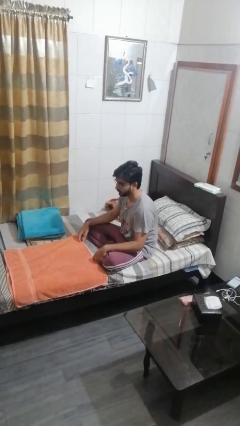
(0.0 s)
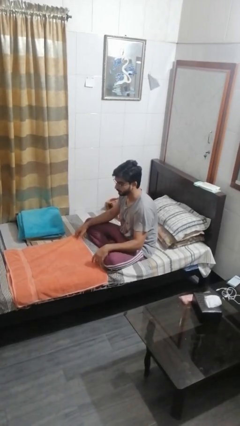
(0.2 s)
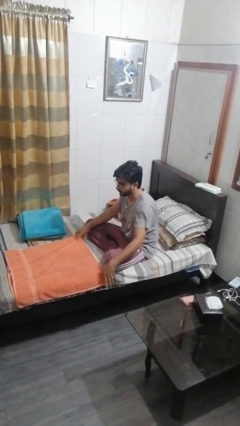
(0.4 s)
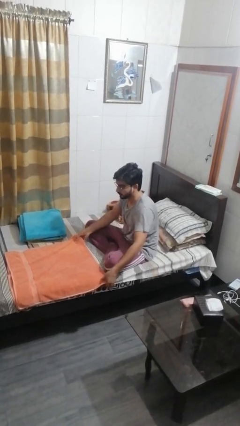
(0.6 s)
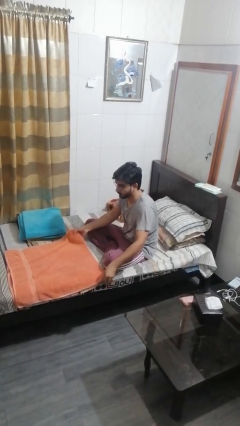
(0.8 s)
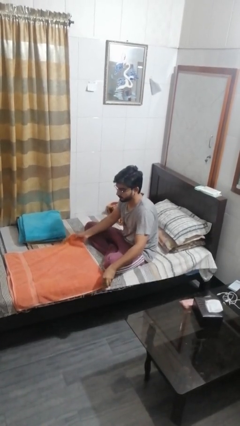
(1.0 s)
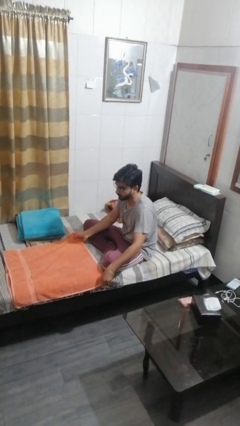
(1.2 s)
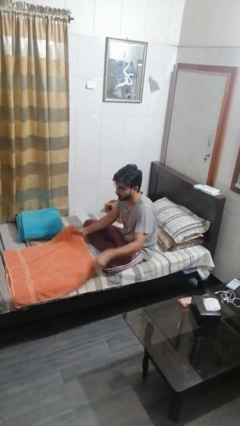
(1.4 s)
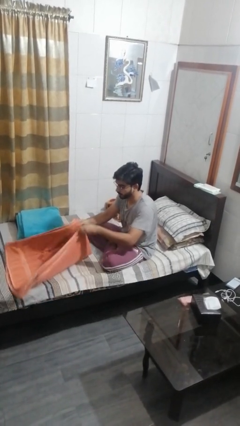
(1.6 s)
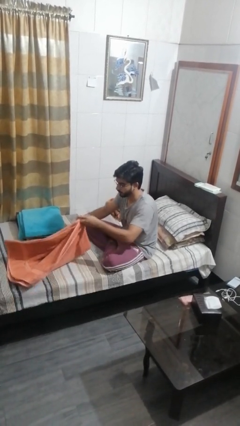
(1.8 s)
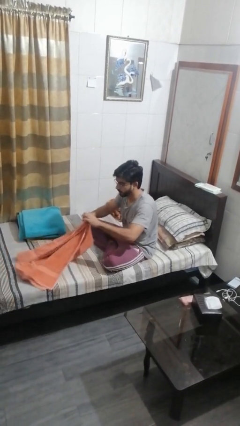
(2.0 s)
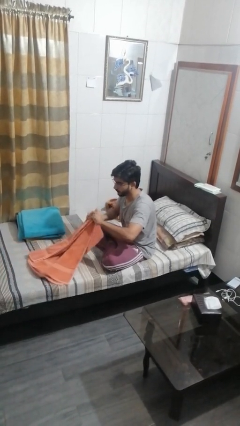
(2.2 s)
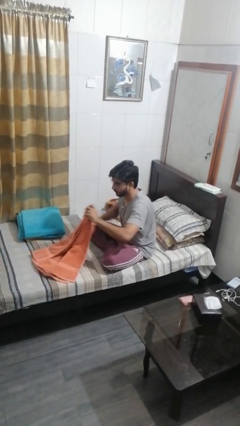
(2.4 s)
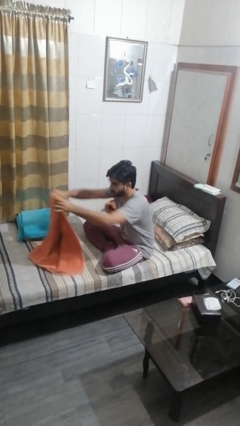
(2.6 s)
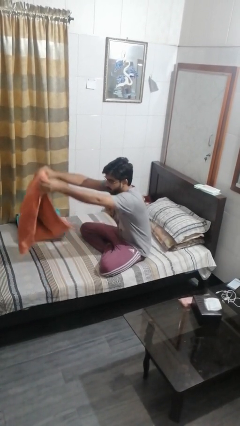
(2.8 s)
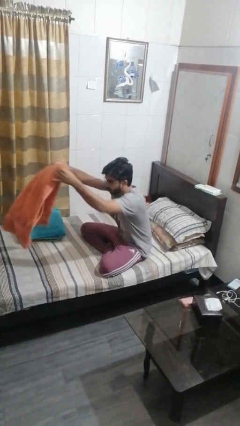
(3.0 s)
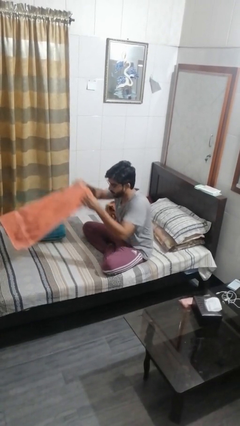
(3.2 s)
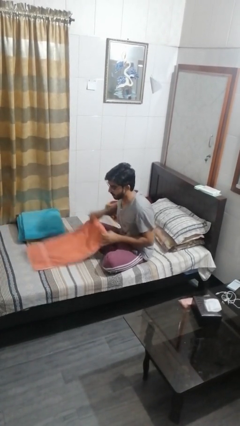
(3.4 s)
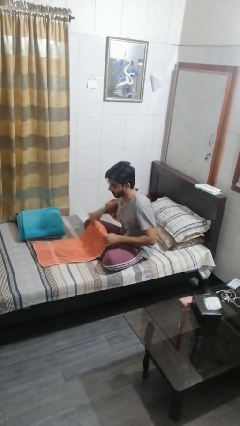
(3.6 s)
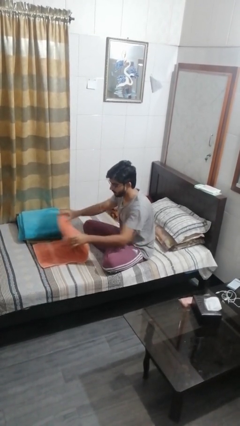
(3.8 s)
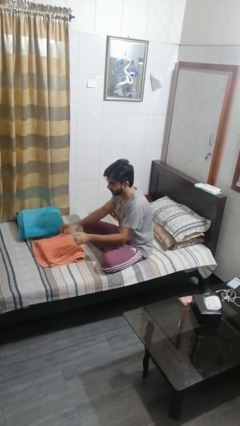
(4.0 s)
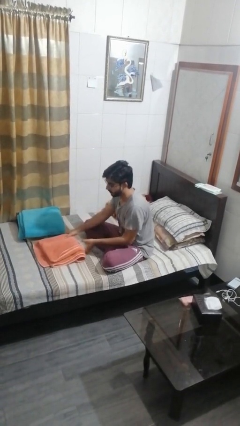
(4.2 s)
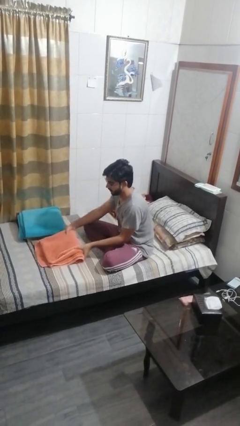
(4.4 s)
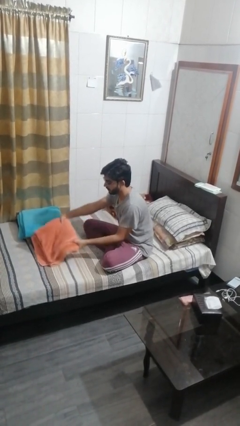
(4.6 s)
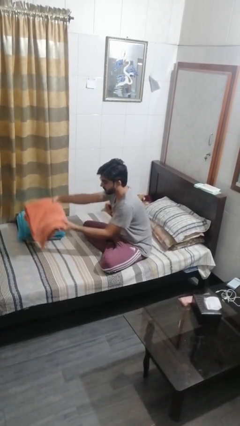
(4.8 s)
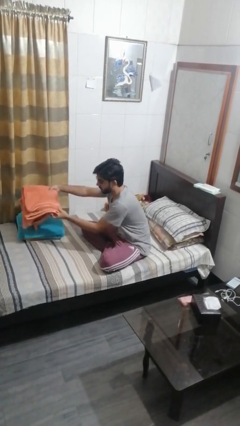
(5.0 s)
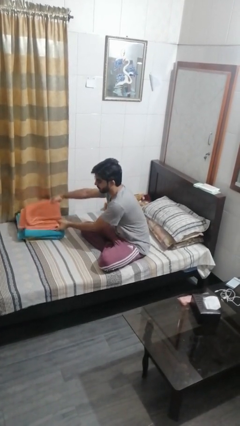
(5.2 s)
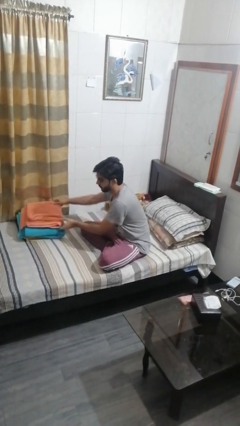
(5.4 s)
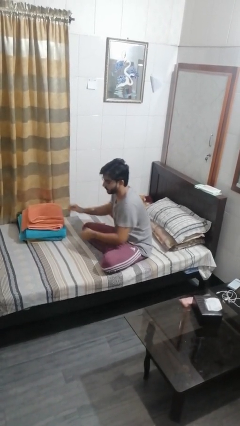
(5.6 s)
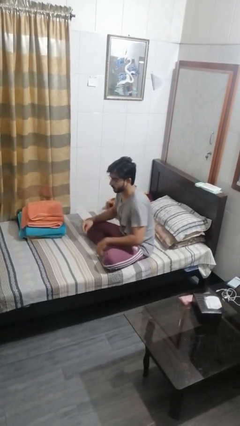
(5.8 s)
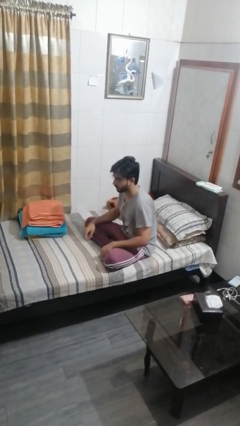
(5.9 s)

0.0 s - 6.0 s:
person folds towel

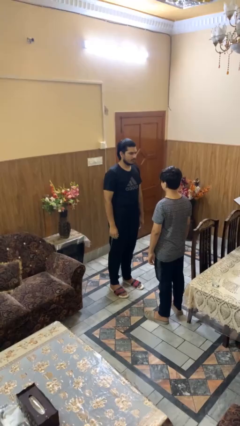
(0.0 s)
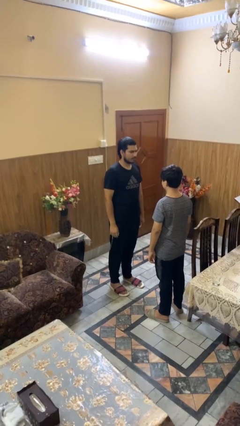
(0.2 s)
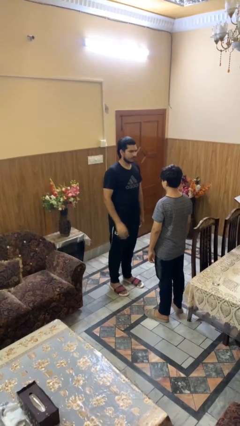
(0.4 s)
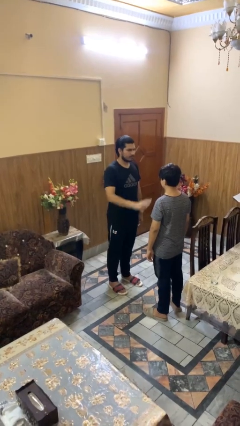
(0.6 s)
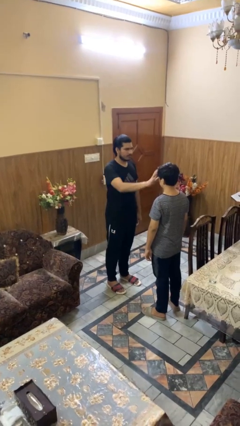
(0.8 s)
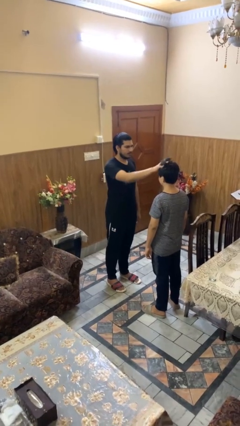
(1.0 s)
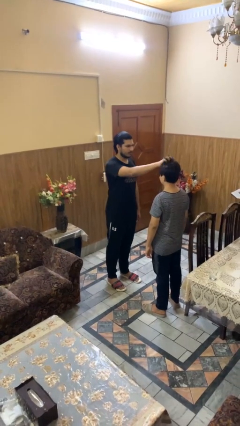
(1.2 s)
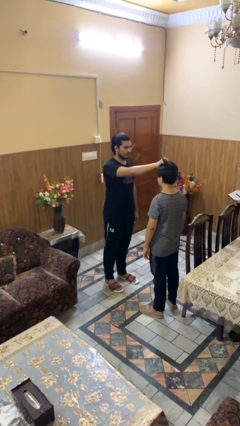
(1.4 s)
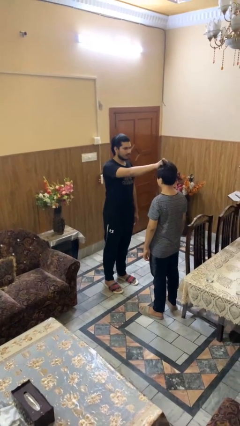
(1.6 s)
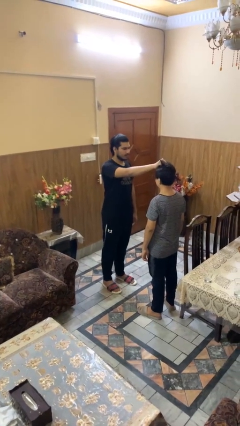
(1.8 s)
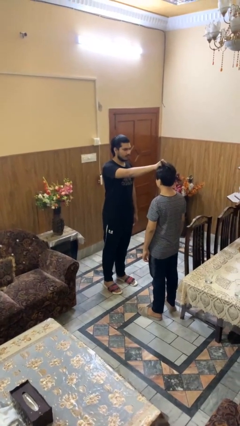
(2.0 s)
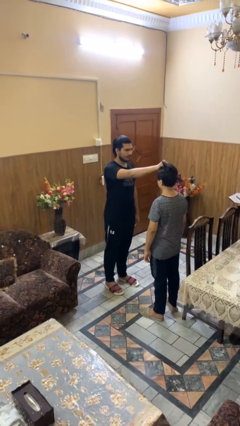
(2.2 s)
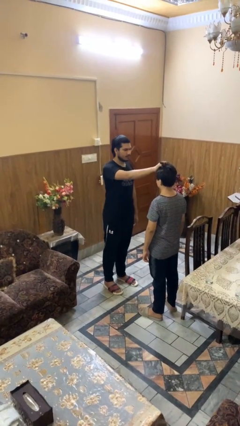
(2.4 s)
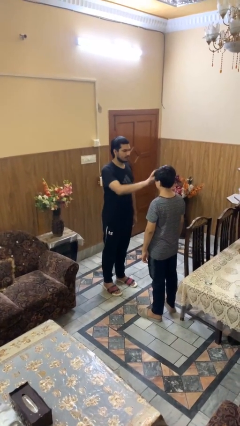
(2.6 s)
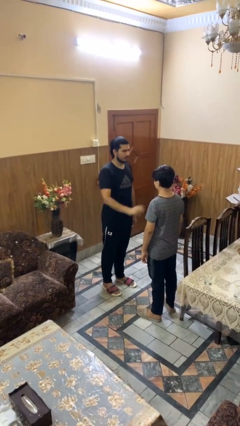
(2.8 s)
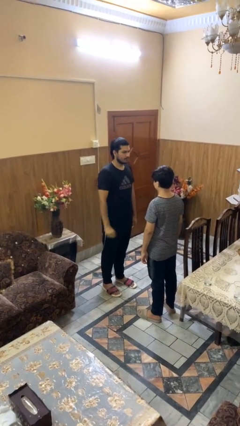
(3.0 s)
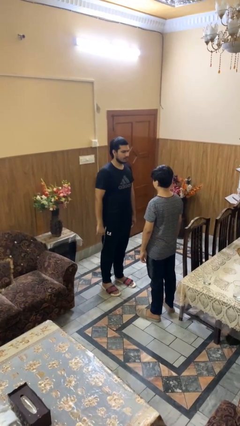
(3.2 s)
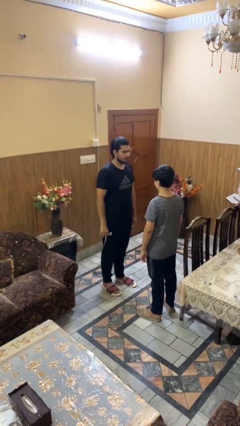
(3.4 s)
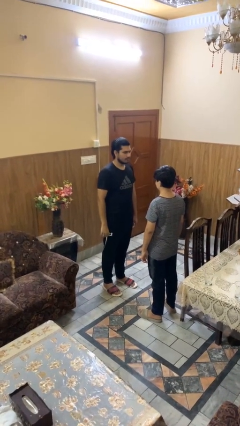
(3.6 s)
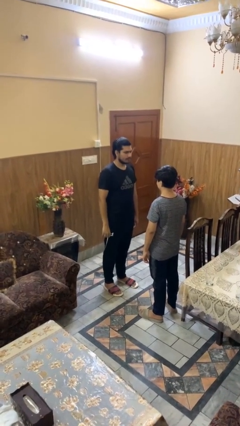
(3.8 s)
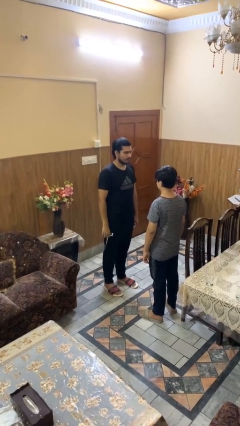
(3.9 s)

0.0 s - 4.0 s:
person grabs person by hair

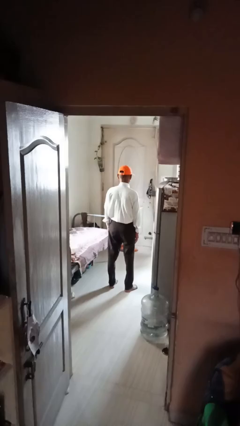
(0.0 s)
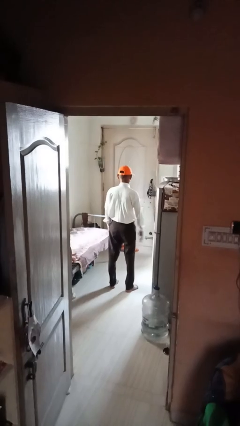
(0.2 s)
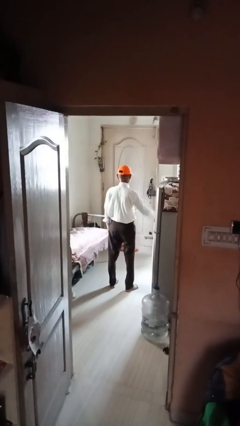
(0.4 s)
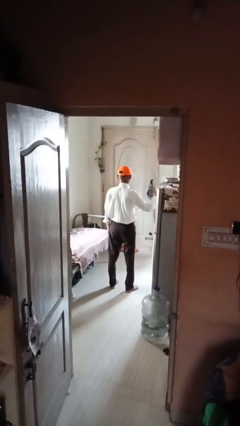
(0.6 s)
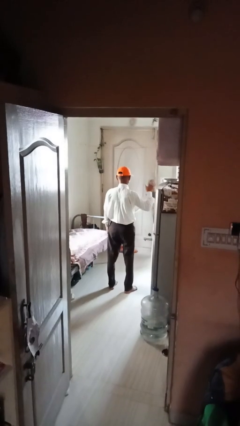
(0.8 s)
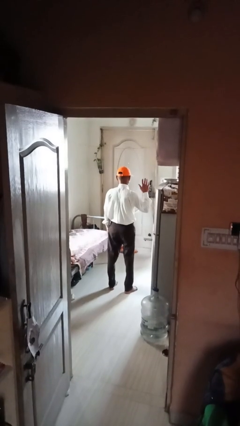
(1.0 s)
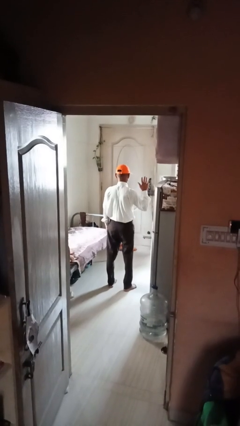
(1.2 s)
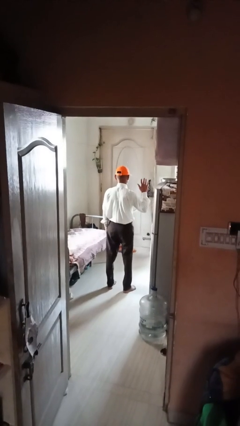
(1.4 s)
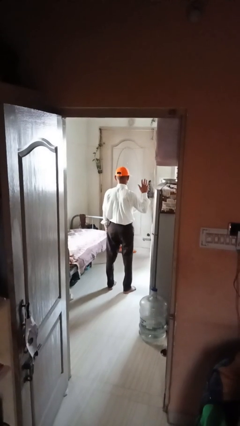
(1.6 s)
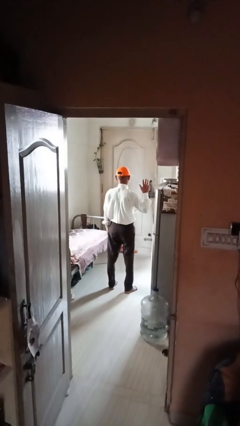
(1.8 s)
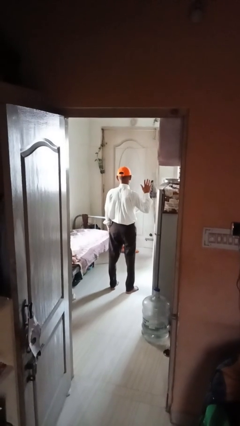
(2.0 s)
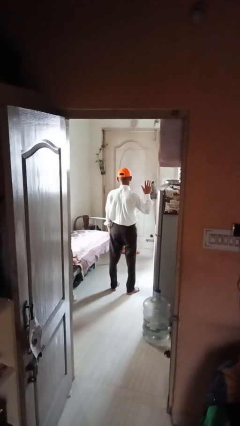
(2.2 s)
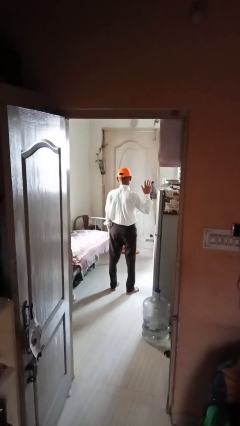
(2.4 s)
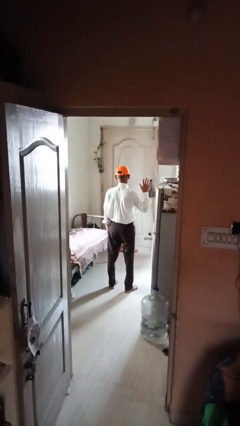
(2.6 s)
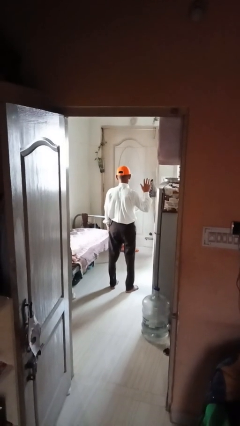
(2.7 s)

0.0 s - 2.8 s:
person gestures number five

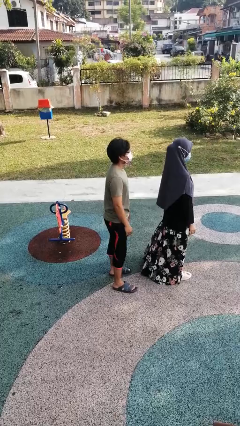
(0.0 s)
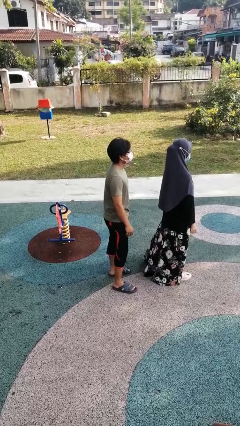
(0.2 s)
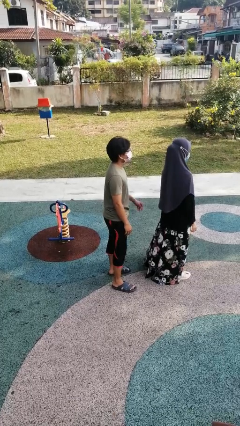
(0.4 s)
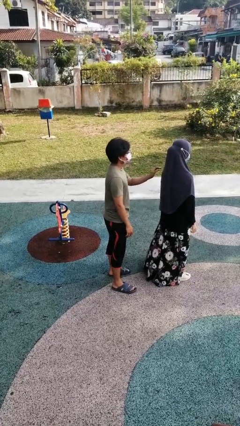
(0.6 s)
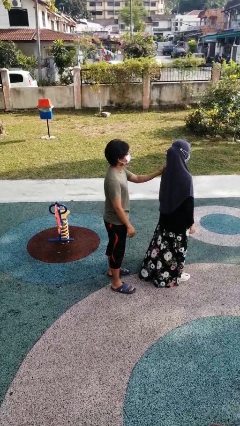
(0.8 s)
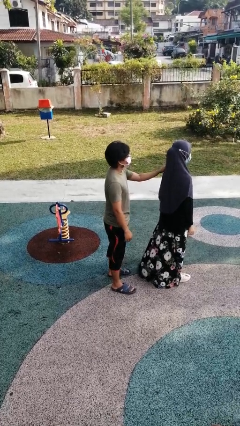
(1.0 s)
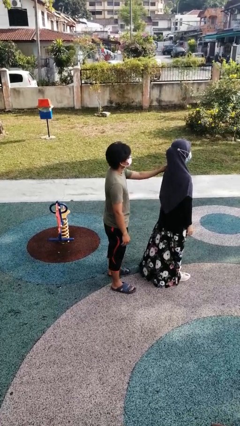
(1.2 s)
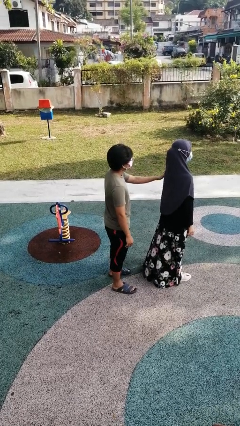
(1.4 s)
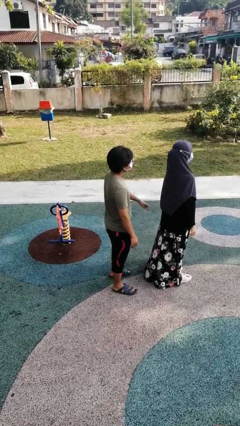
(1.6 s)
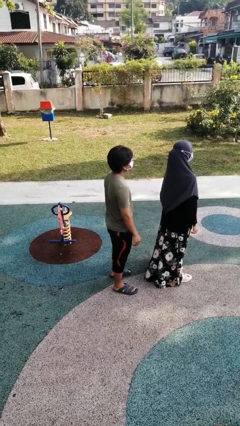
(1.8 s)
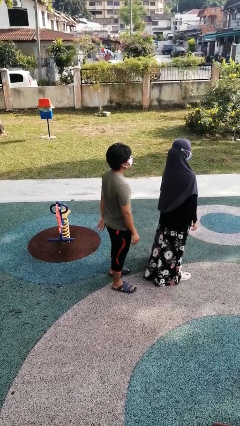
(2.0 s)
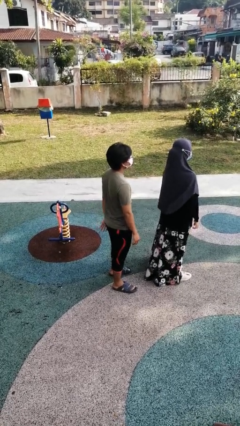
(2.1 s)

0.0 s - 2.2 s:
person touches back of person

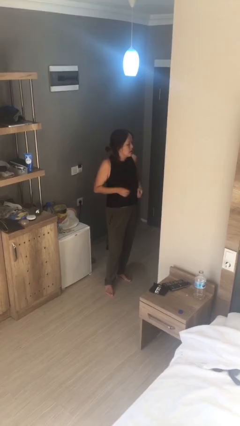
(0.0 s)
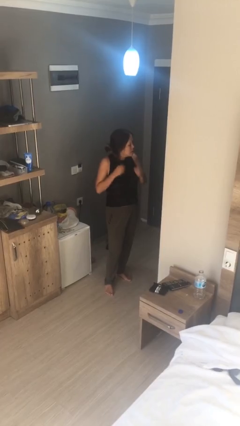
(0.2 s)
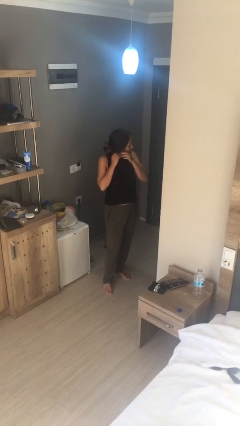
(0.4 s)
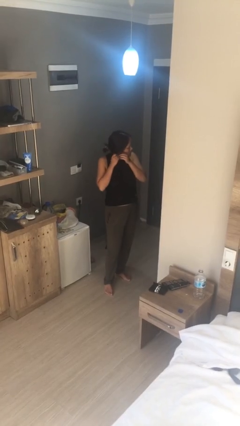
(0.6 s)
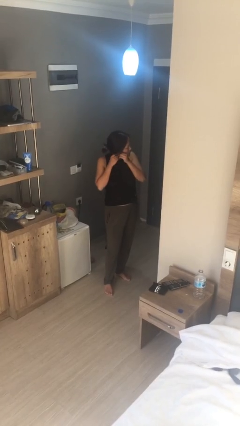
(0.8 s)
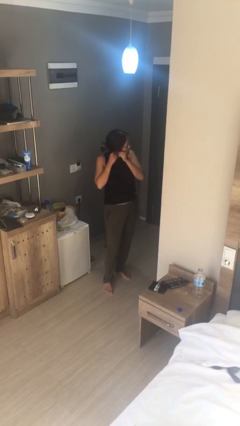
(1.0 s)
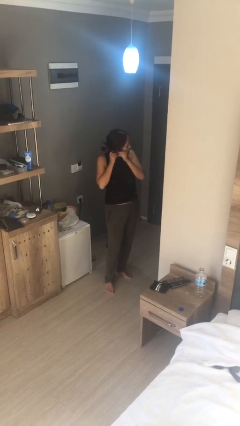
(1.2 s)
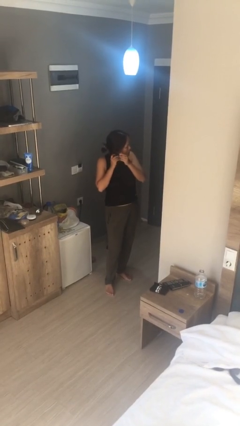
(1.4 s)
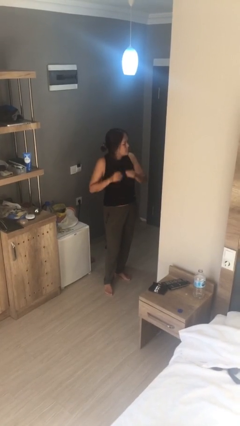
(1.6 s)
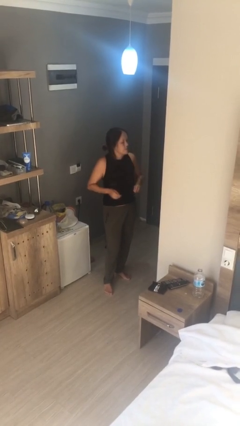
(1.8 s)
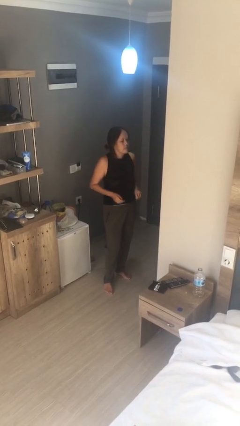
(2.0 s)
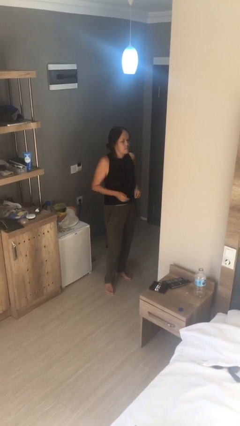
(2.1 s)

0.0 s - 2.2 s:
person takes off earrings
